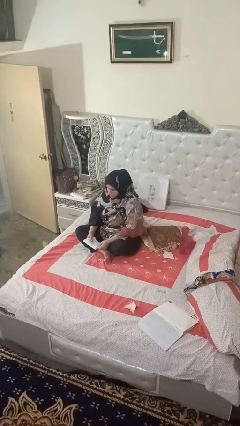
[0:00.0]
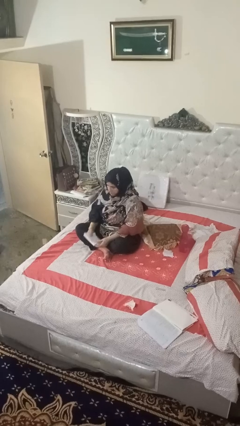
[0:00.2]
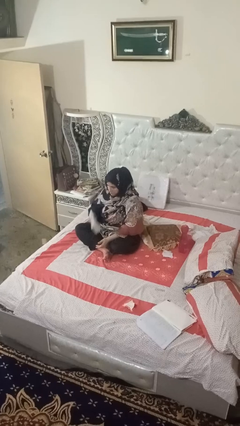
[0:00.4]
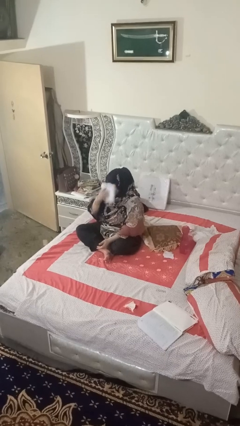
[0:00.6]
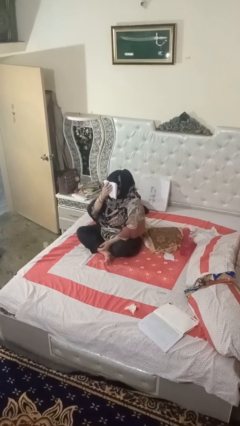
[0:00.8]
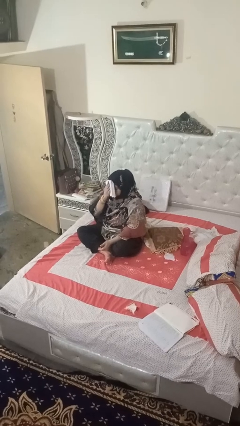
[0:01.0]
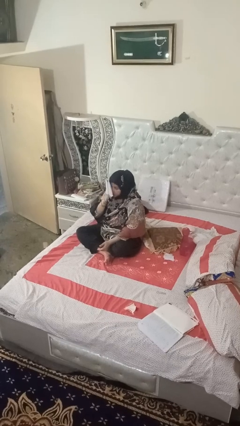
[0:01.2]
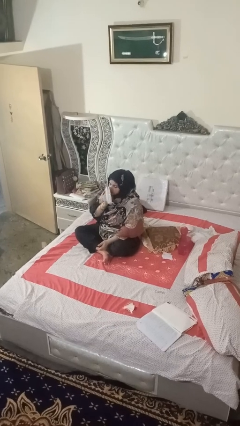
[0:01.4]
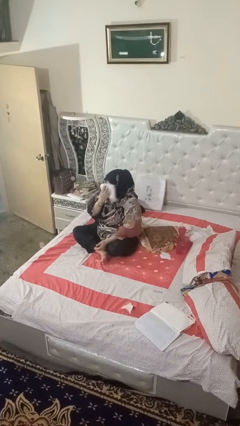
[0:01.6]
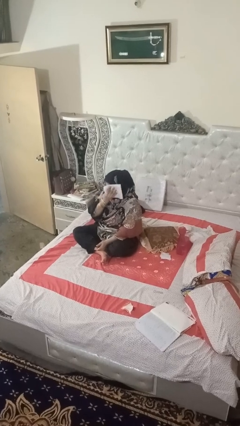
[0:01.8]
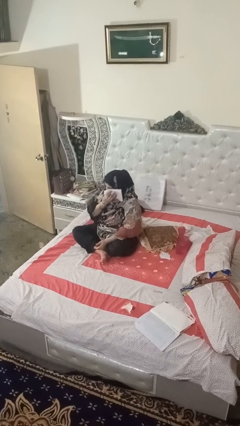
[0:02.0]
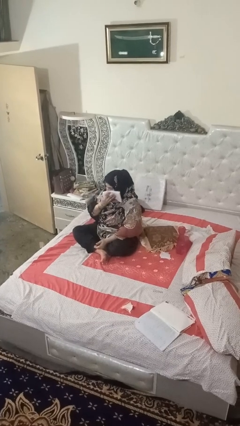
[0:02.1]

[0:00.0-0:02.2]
person wipes mouth with napkin

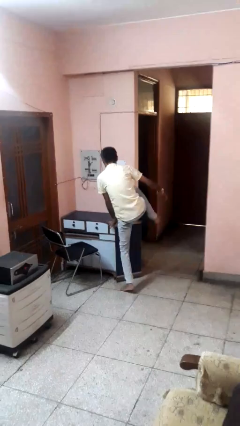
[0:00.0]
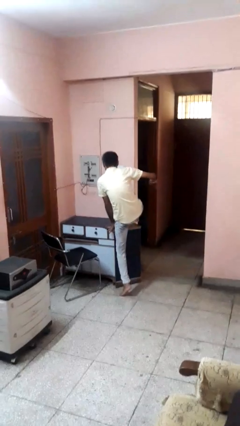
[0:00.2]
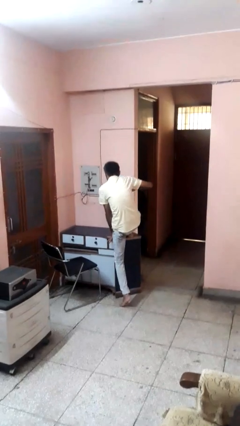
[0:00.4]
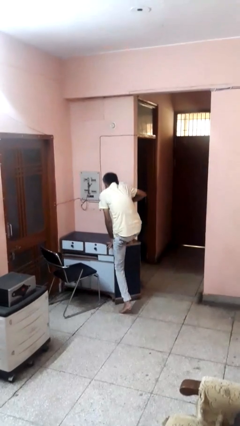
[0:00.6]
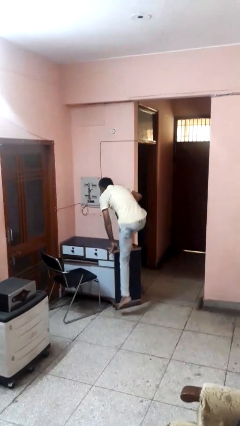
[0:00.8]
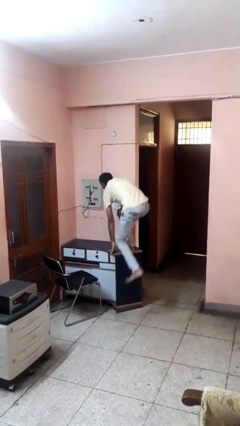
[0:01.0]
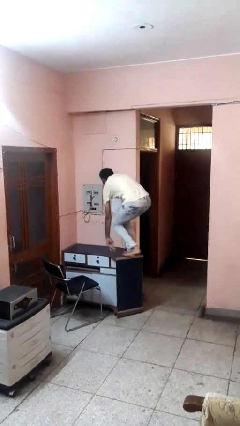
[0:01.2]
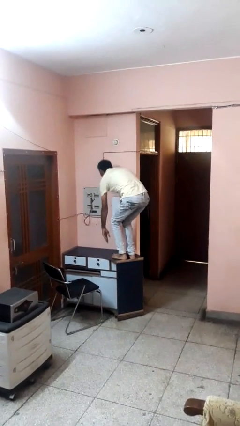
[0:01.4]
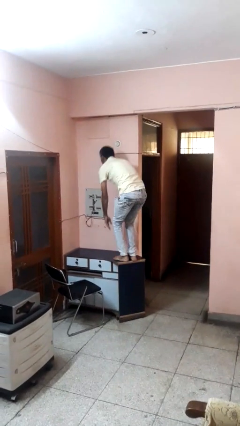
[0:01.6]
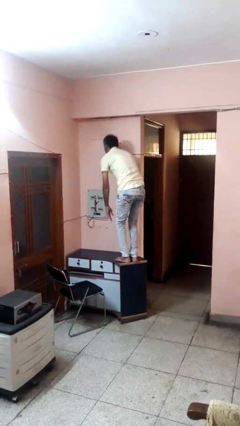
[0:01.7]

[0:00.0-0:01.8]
person climbs on table

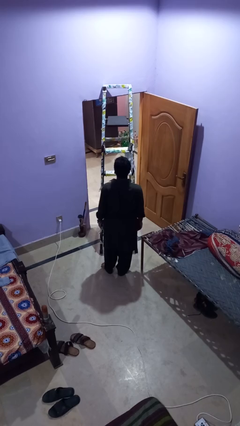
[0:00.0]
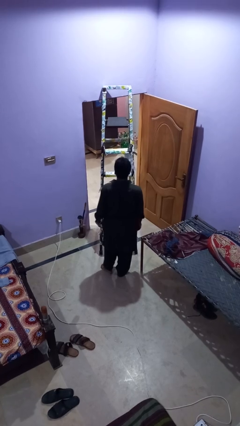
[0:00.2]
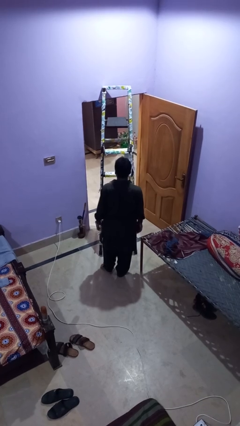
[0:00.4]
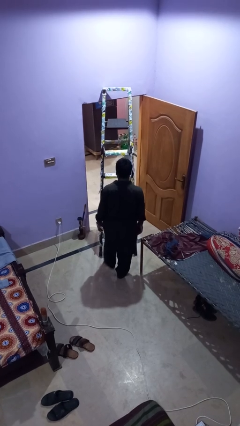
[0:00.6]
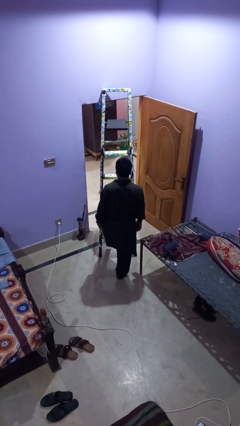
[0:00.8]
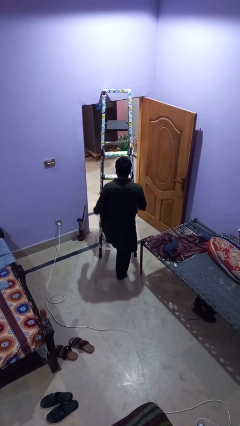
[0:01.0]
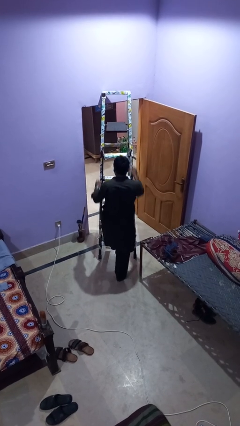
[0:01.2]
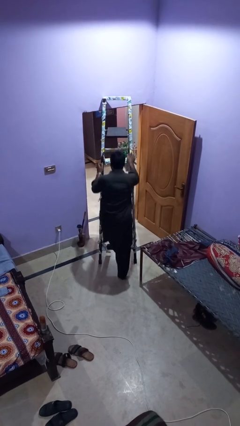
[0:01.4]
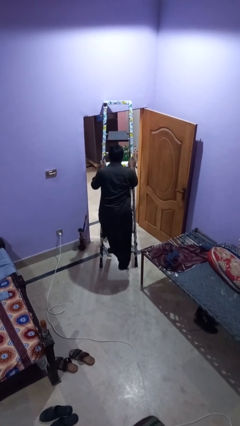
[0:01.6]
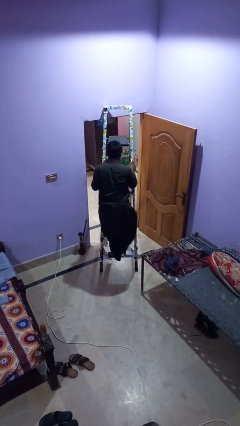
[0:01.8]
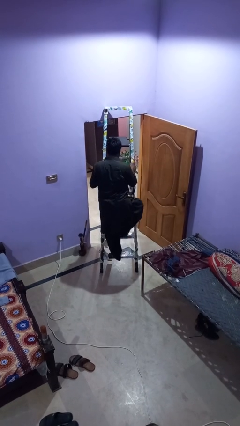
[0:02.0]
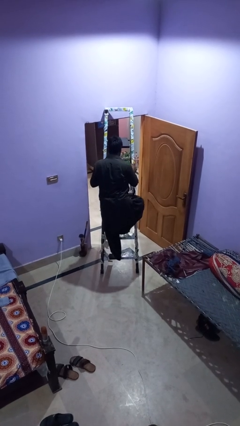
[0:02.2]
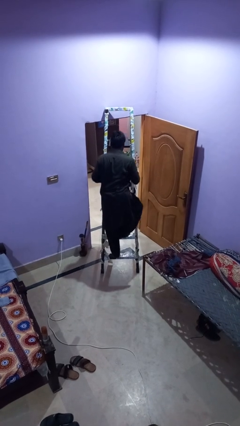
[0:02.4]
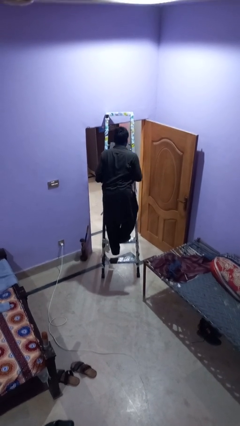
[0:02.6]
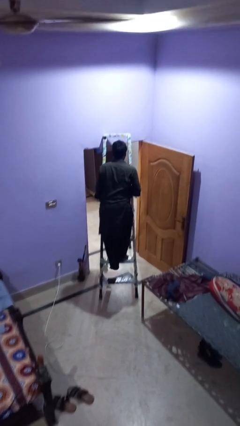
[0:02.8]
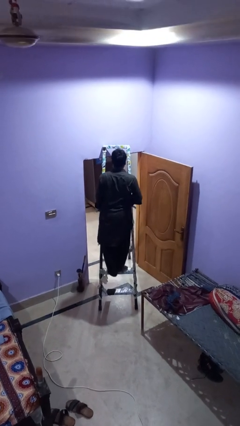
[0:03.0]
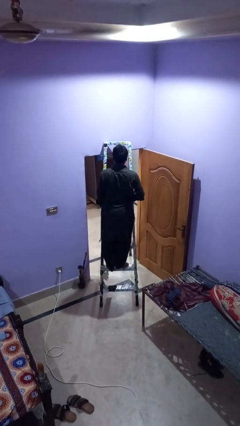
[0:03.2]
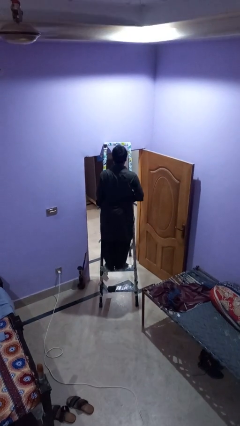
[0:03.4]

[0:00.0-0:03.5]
person climbs up ladder

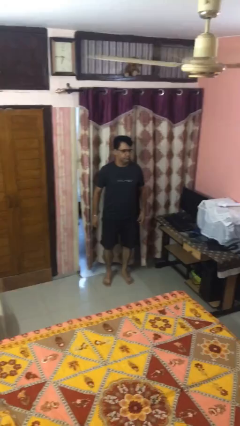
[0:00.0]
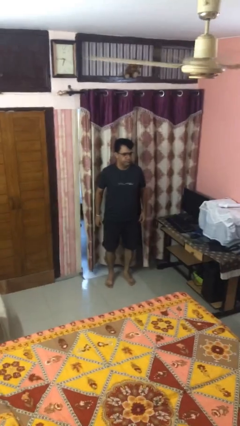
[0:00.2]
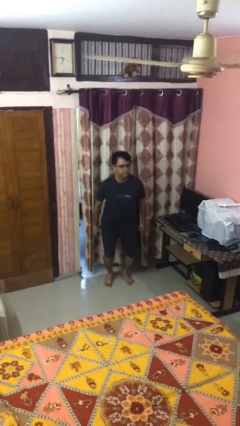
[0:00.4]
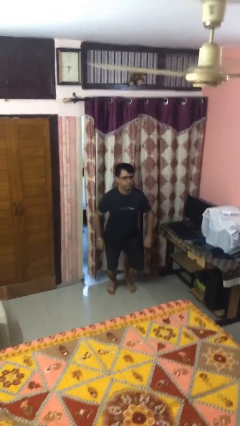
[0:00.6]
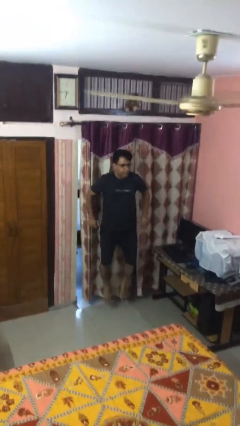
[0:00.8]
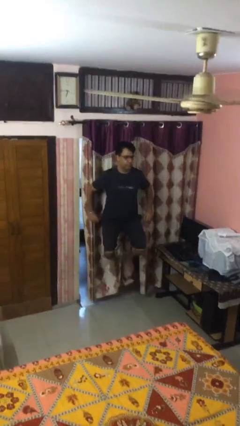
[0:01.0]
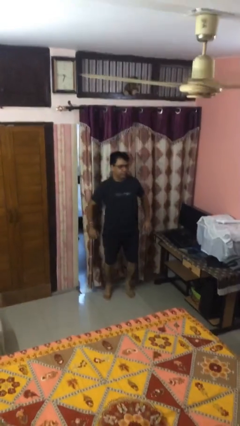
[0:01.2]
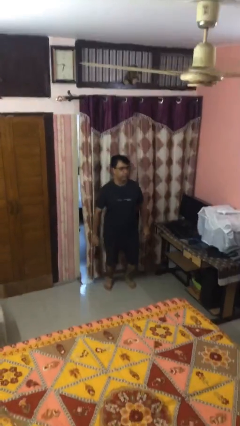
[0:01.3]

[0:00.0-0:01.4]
person jumps

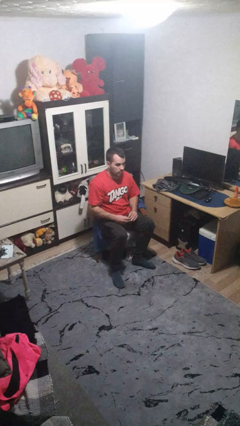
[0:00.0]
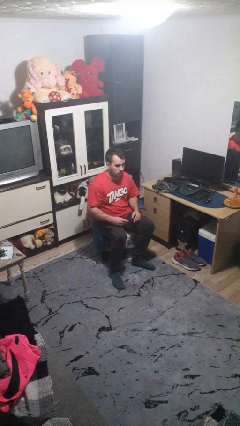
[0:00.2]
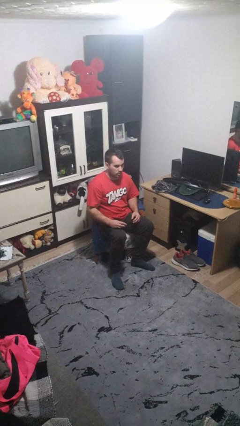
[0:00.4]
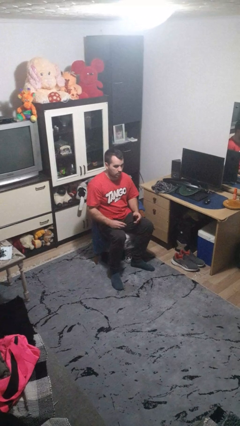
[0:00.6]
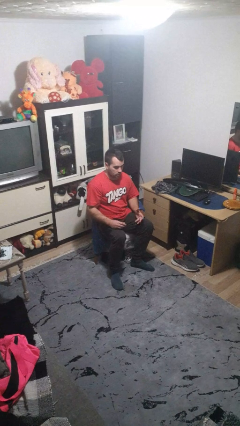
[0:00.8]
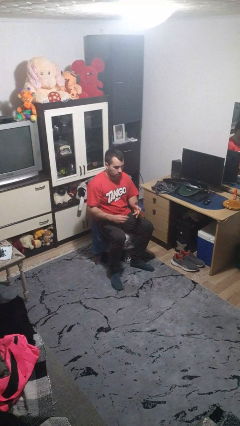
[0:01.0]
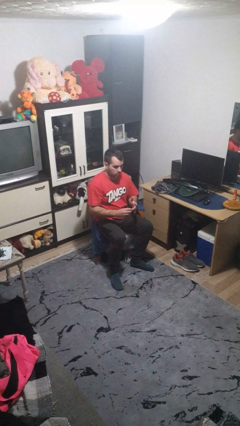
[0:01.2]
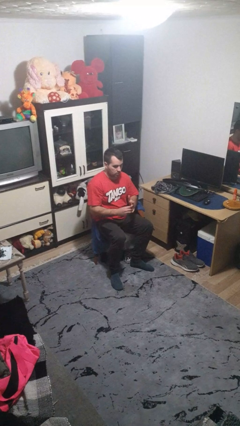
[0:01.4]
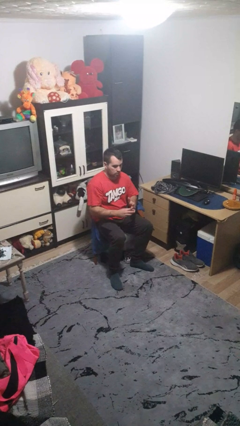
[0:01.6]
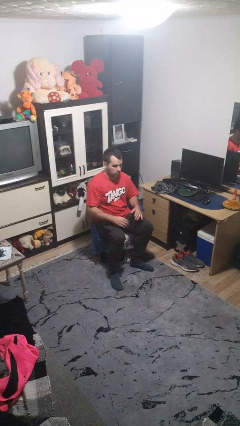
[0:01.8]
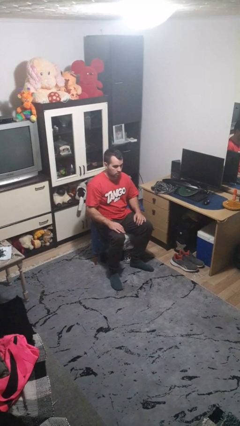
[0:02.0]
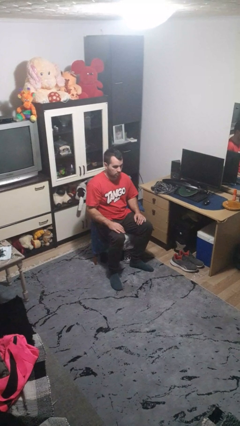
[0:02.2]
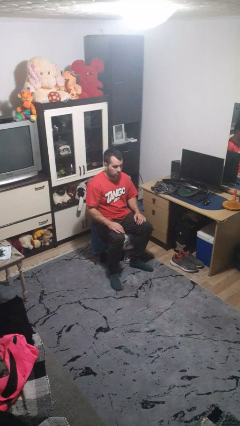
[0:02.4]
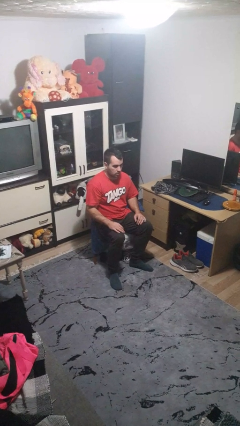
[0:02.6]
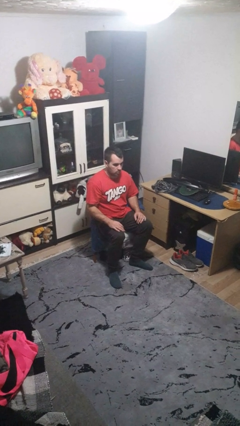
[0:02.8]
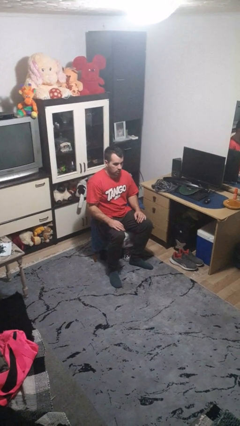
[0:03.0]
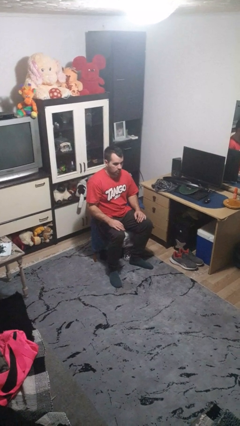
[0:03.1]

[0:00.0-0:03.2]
person puts on ring

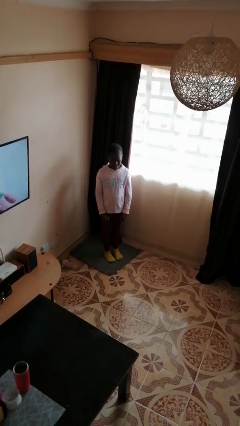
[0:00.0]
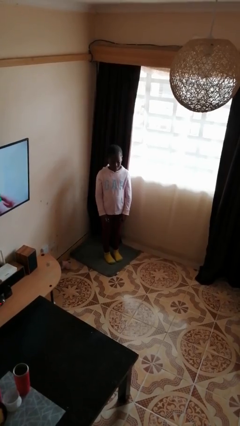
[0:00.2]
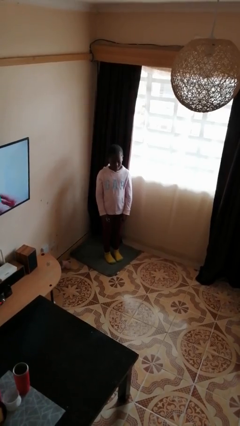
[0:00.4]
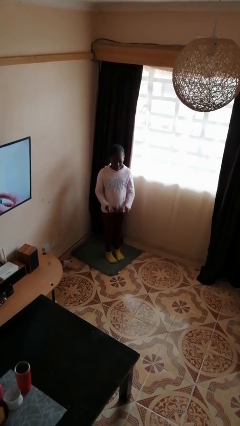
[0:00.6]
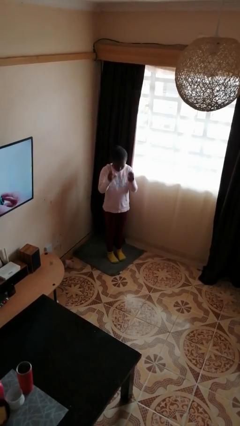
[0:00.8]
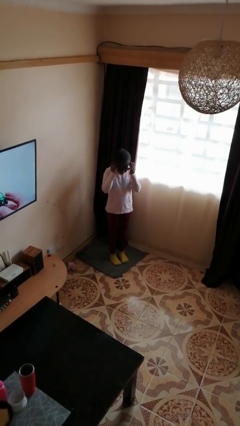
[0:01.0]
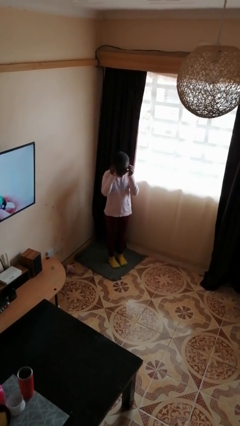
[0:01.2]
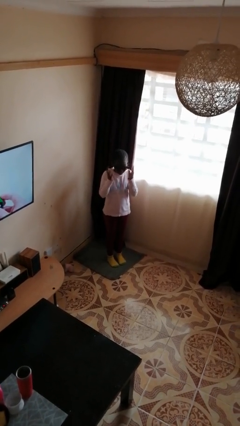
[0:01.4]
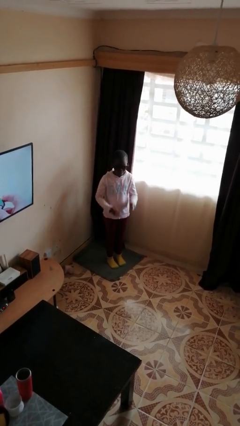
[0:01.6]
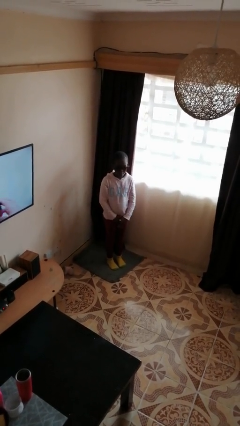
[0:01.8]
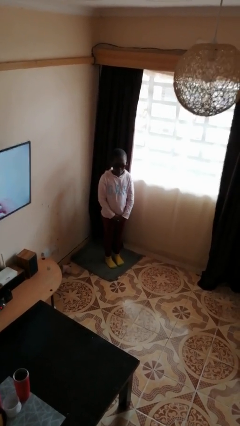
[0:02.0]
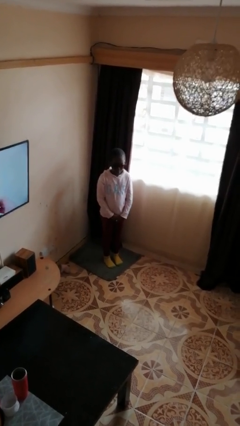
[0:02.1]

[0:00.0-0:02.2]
person puts on sunglasses

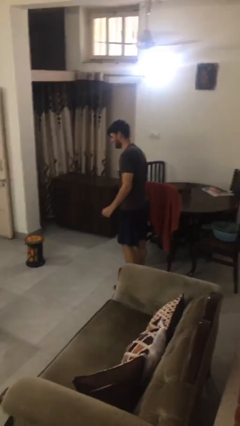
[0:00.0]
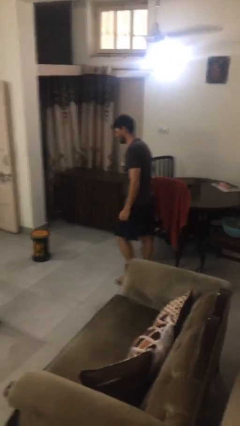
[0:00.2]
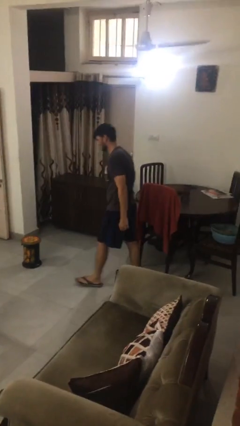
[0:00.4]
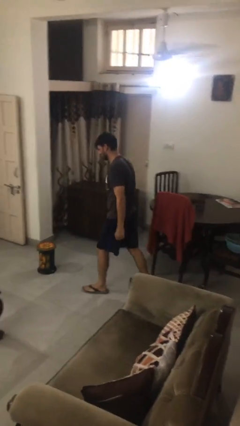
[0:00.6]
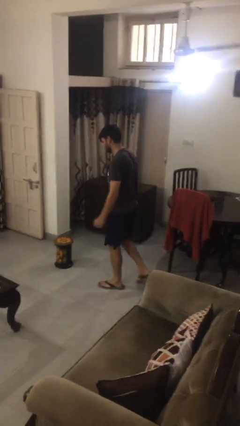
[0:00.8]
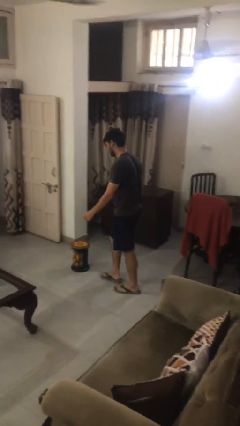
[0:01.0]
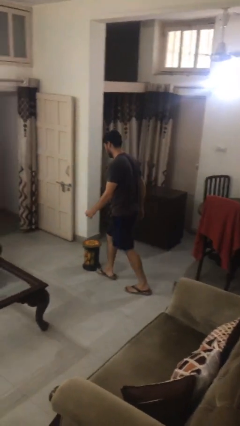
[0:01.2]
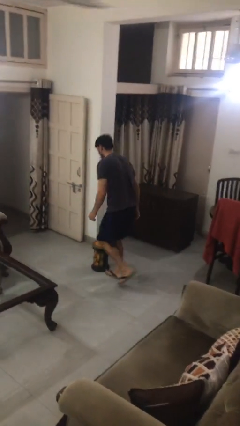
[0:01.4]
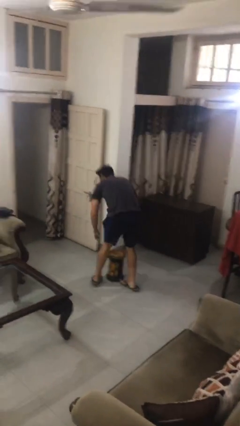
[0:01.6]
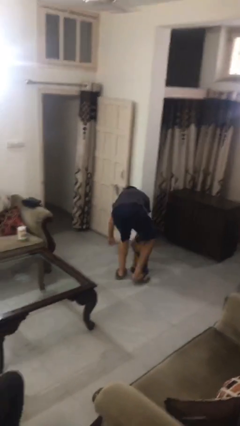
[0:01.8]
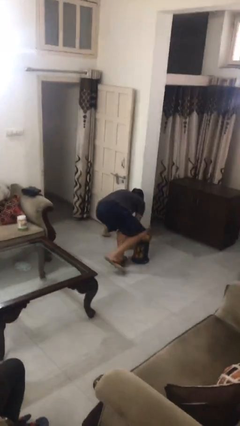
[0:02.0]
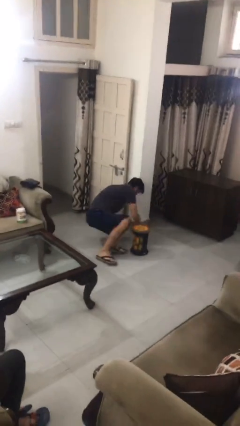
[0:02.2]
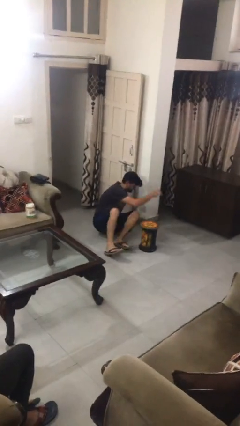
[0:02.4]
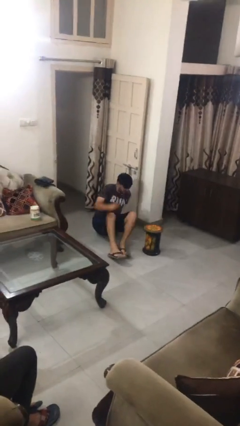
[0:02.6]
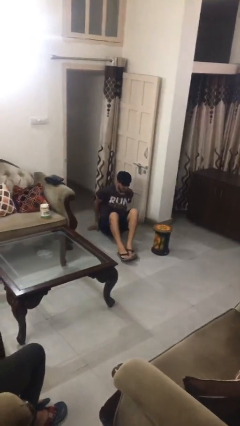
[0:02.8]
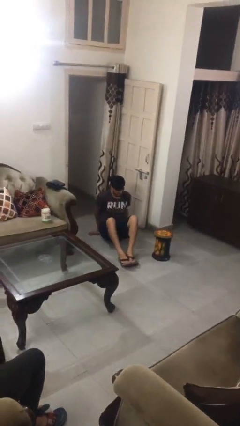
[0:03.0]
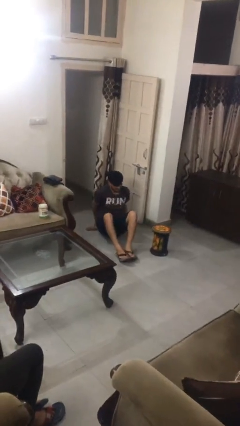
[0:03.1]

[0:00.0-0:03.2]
person trips on object on floor
